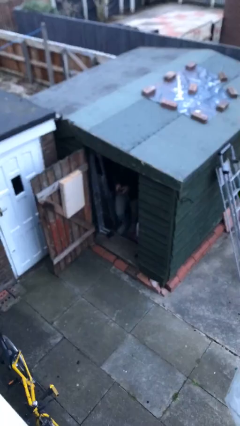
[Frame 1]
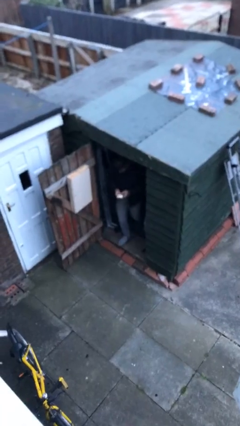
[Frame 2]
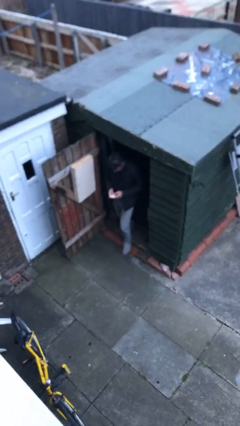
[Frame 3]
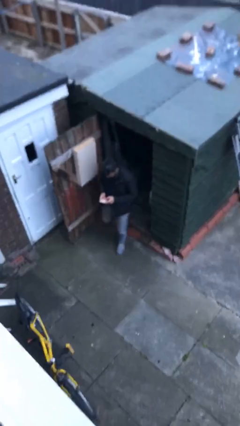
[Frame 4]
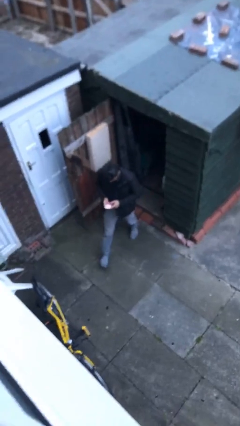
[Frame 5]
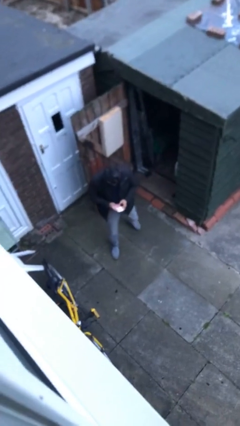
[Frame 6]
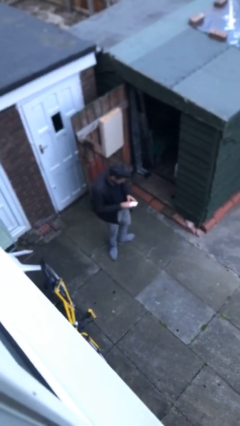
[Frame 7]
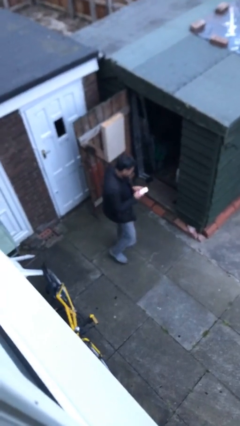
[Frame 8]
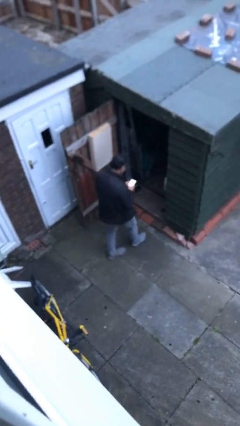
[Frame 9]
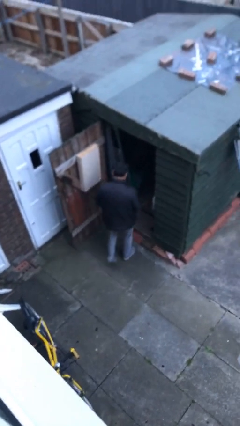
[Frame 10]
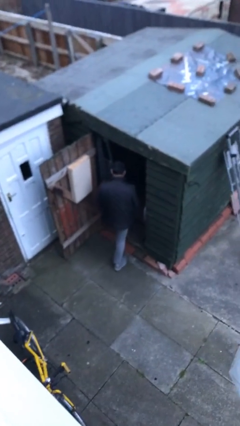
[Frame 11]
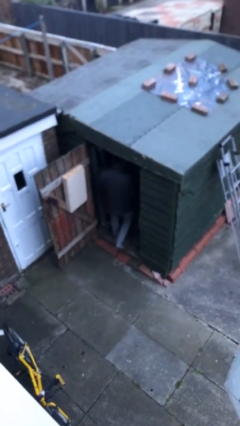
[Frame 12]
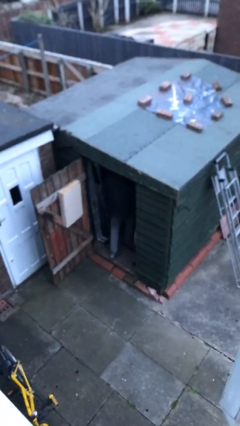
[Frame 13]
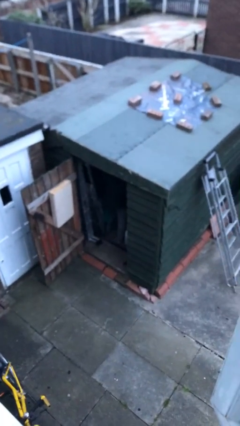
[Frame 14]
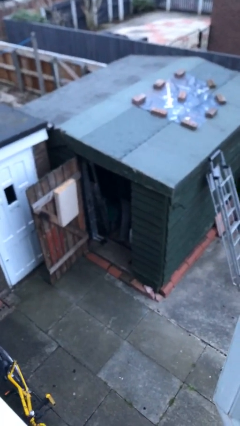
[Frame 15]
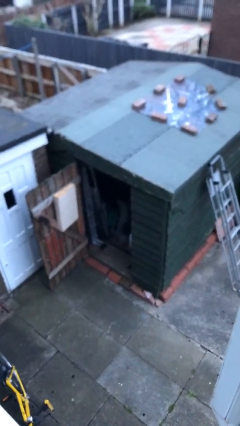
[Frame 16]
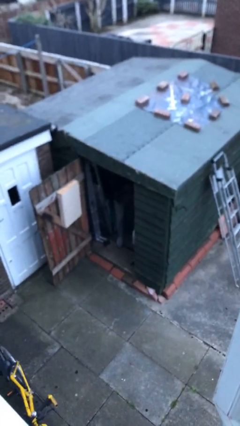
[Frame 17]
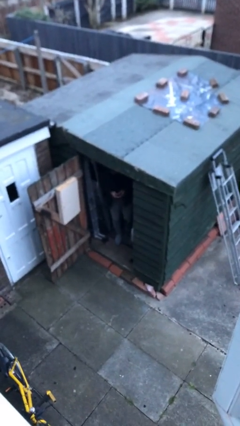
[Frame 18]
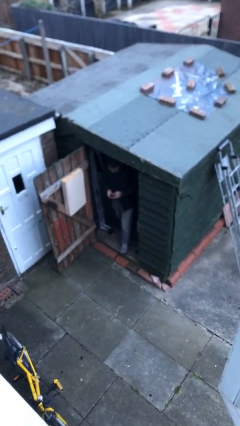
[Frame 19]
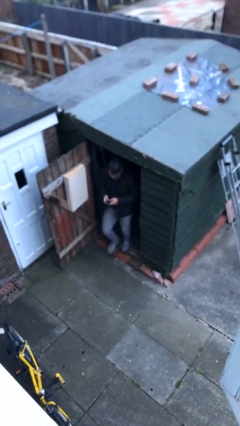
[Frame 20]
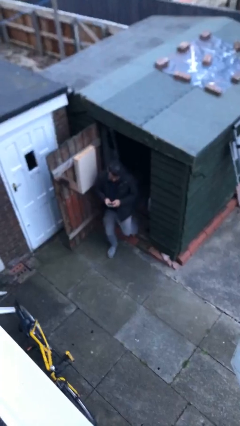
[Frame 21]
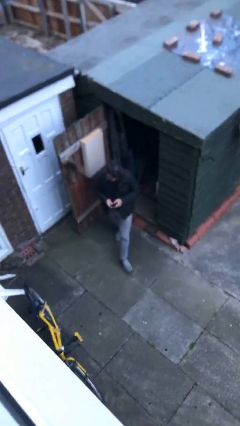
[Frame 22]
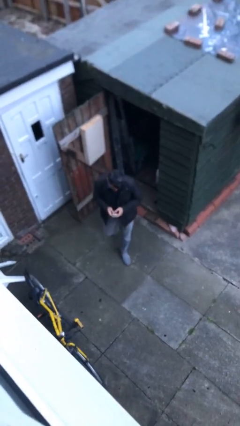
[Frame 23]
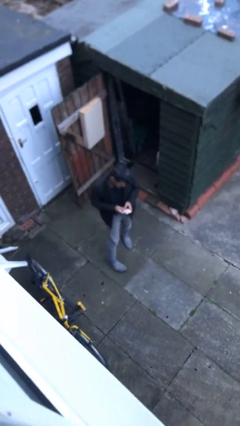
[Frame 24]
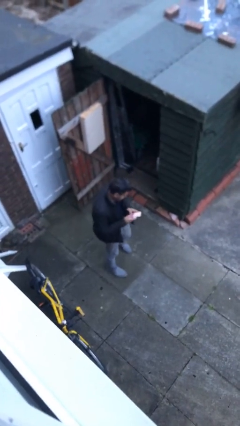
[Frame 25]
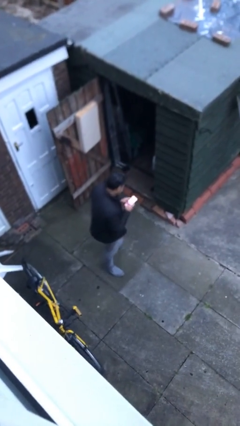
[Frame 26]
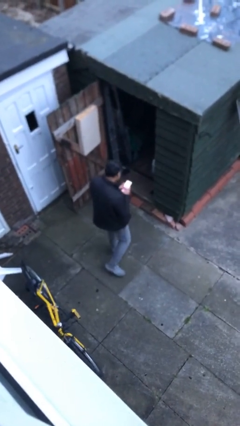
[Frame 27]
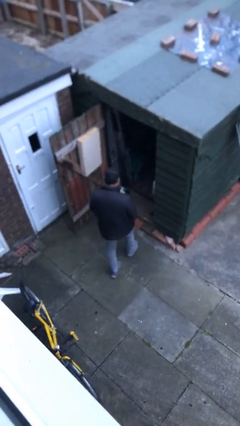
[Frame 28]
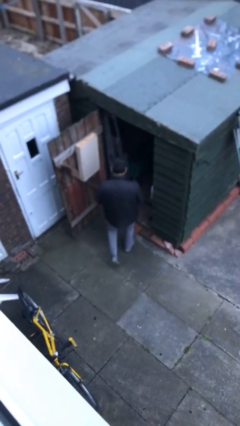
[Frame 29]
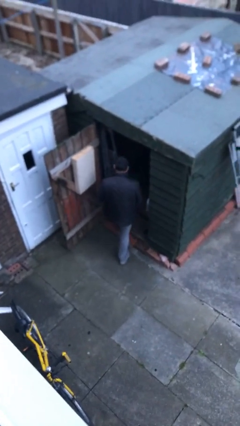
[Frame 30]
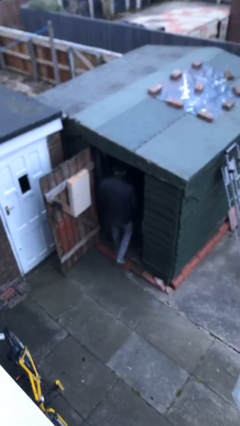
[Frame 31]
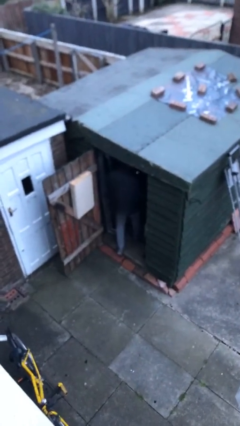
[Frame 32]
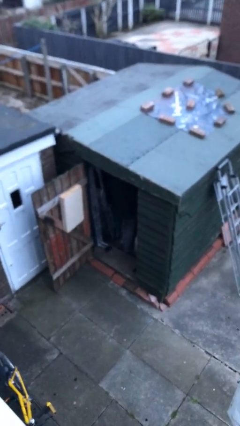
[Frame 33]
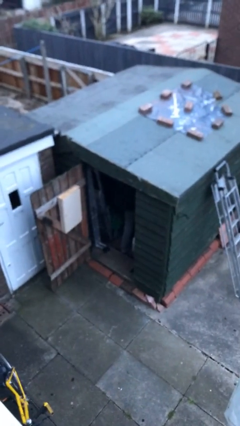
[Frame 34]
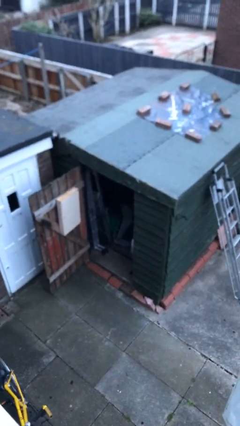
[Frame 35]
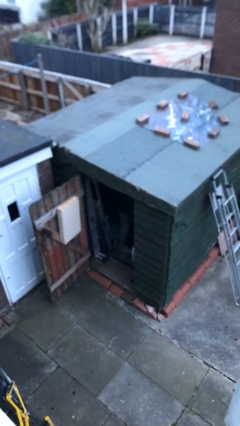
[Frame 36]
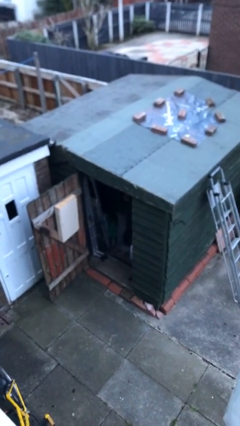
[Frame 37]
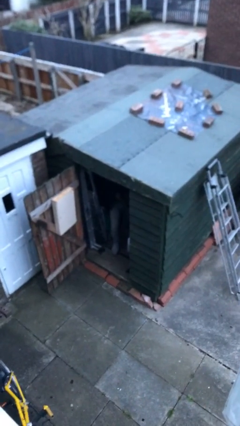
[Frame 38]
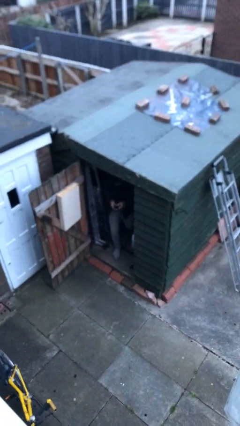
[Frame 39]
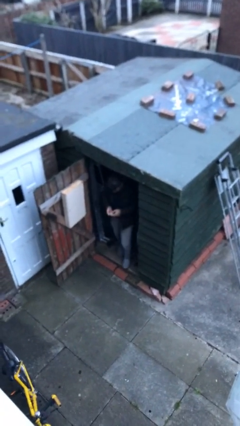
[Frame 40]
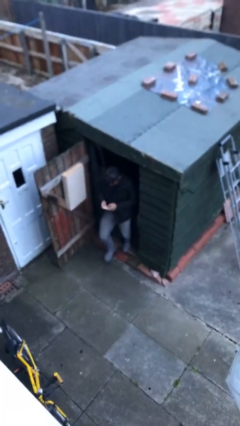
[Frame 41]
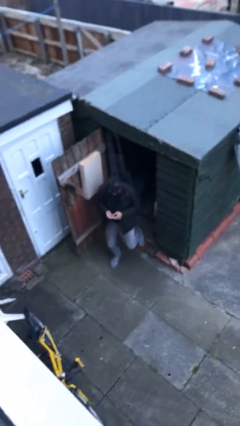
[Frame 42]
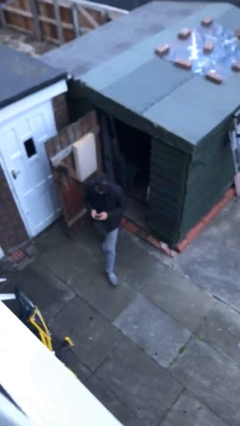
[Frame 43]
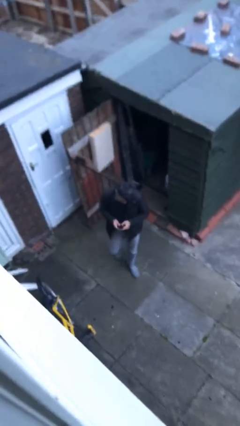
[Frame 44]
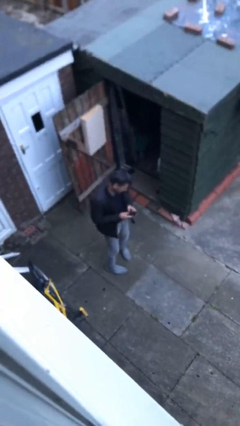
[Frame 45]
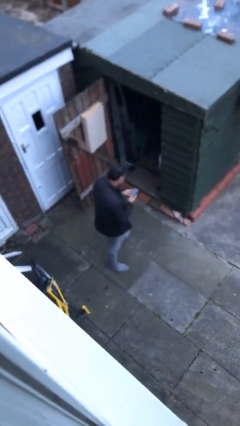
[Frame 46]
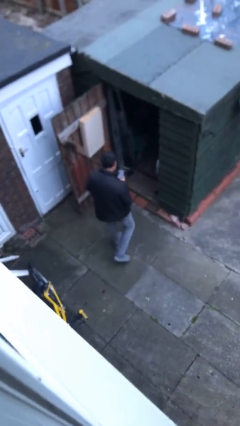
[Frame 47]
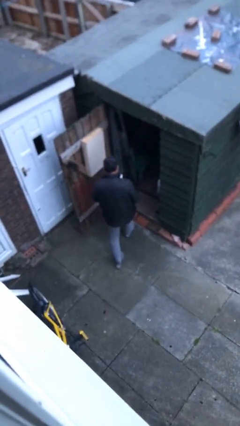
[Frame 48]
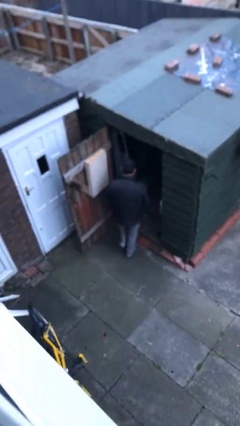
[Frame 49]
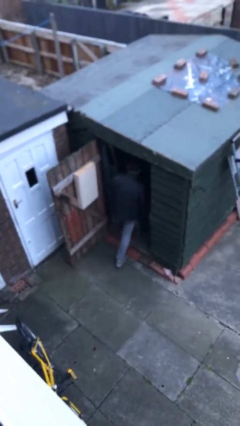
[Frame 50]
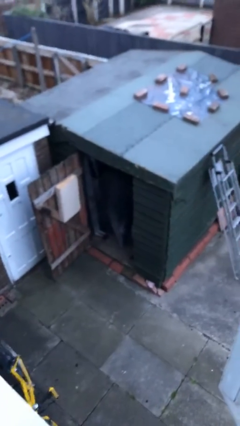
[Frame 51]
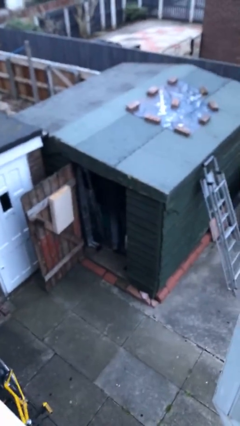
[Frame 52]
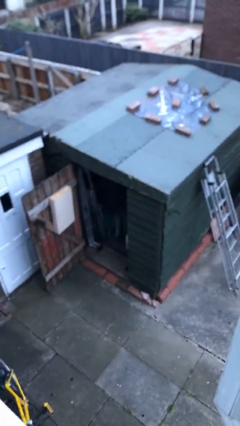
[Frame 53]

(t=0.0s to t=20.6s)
person texts on phone

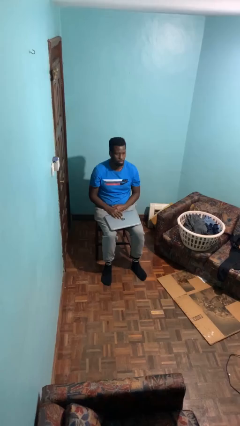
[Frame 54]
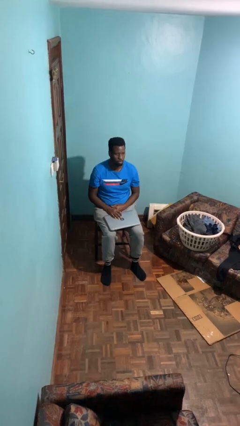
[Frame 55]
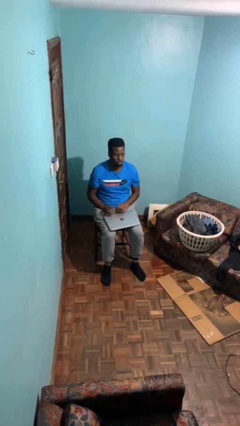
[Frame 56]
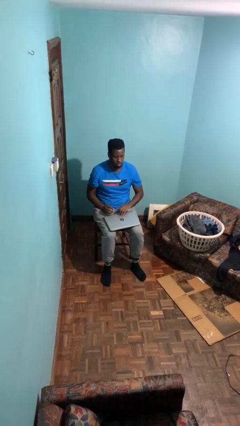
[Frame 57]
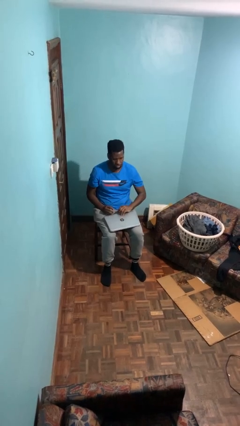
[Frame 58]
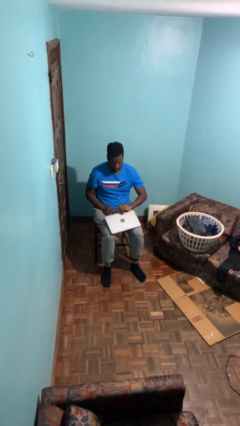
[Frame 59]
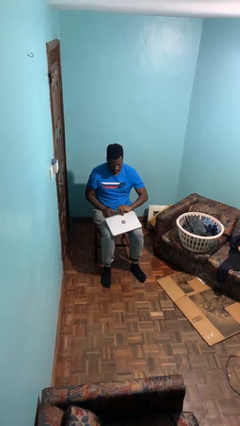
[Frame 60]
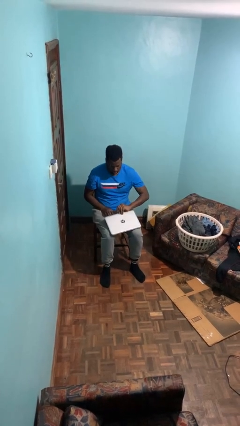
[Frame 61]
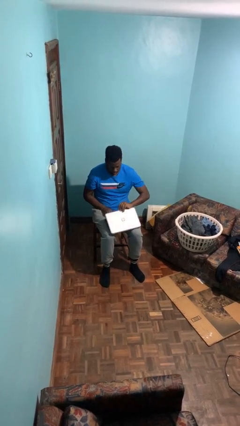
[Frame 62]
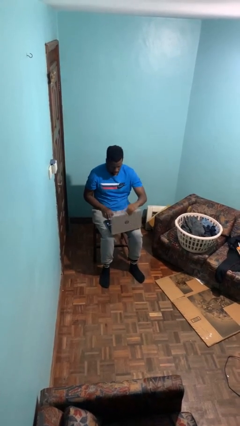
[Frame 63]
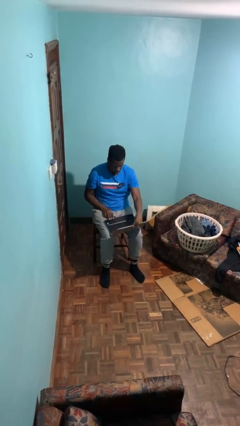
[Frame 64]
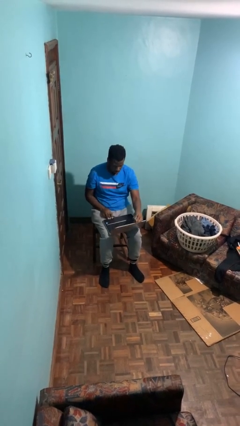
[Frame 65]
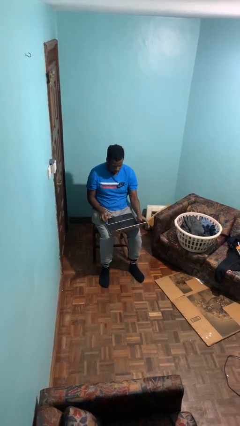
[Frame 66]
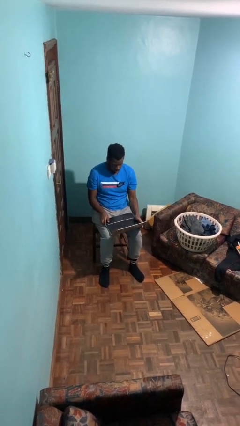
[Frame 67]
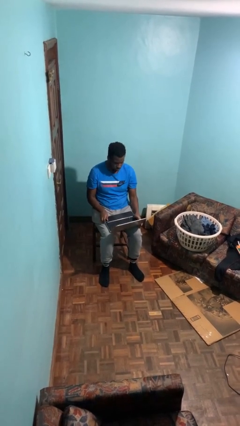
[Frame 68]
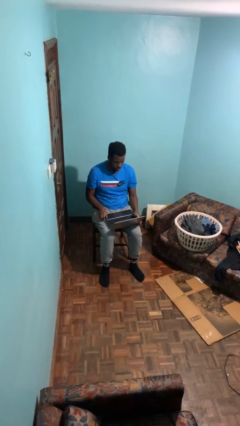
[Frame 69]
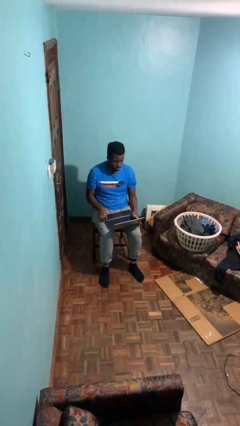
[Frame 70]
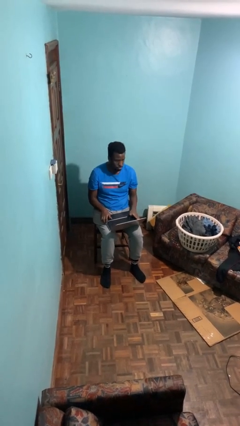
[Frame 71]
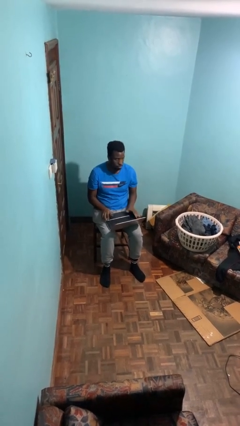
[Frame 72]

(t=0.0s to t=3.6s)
person opens laptop

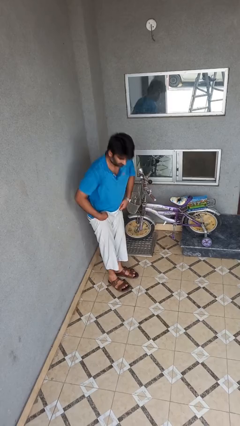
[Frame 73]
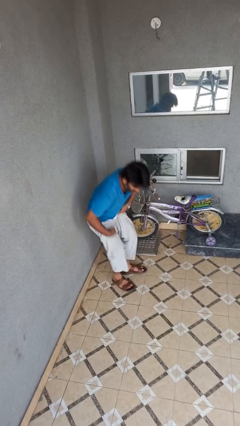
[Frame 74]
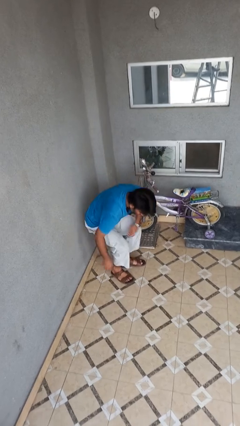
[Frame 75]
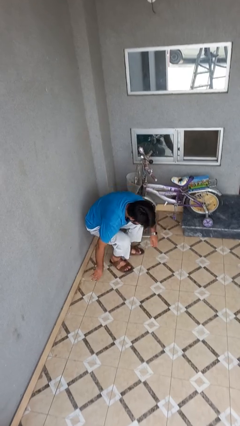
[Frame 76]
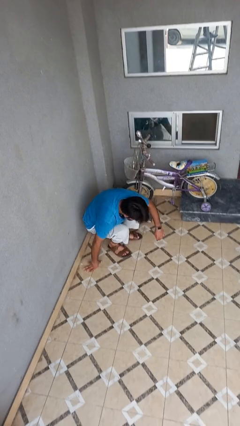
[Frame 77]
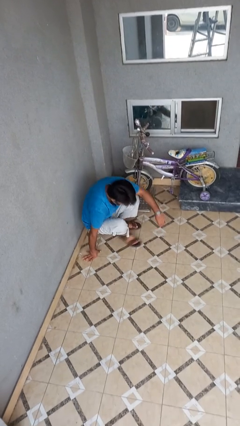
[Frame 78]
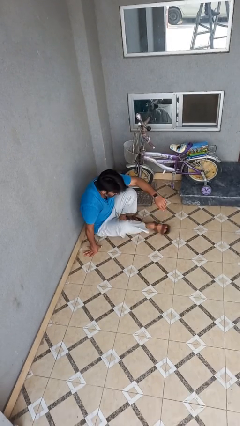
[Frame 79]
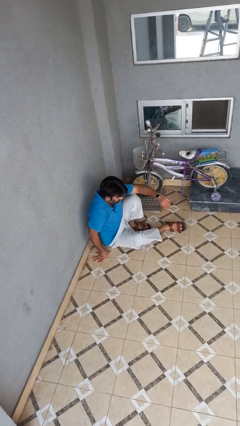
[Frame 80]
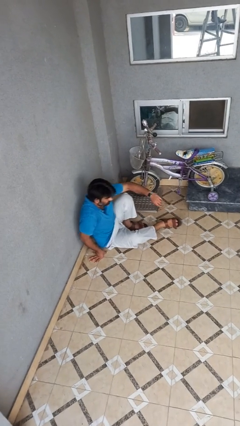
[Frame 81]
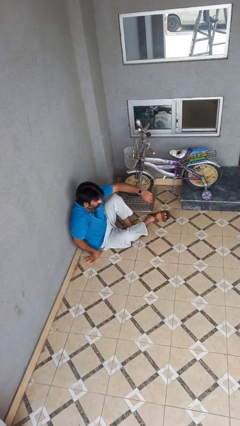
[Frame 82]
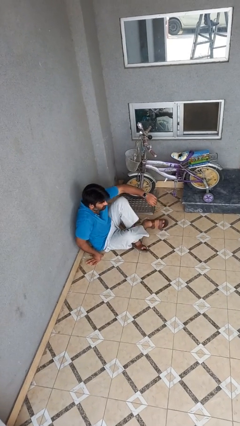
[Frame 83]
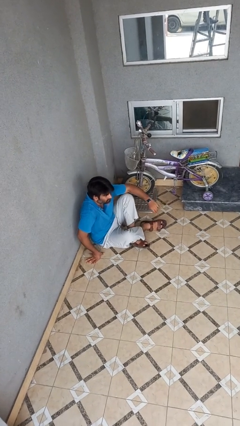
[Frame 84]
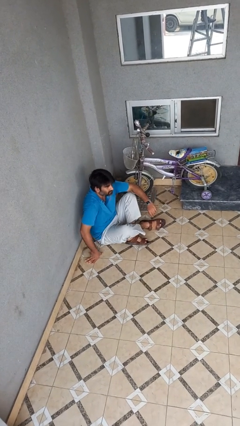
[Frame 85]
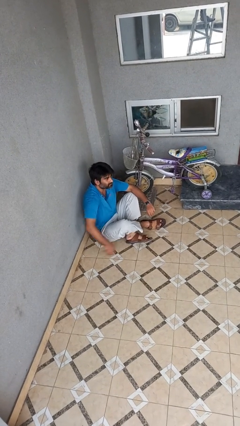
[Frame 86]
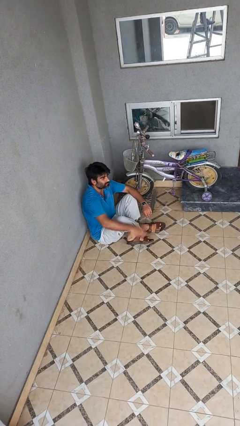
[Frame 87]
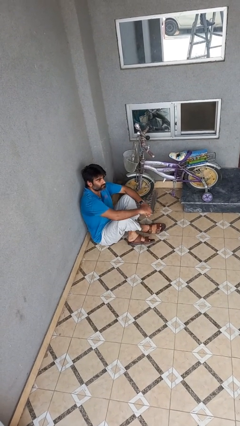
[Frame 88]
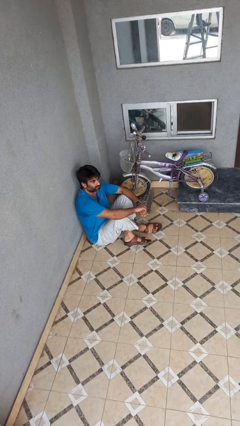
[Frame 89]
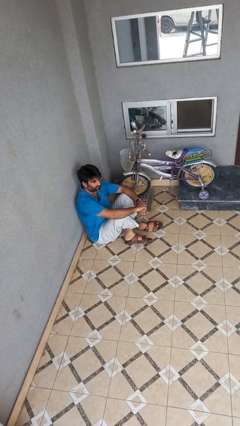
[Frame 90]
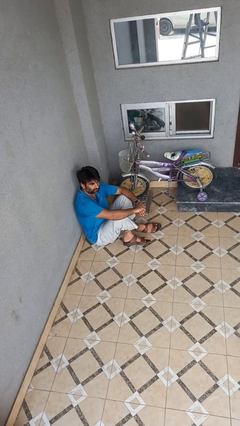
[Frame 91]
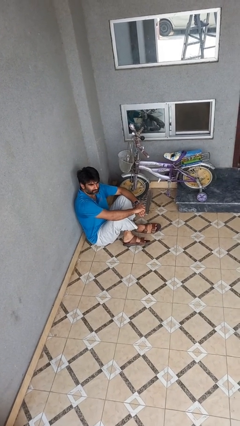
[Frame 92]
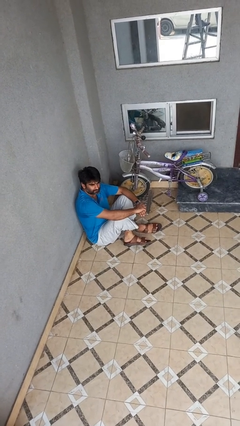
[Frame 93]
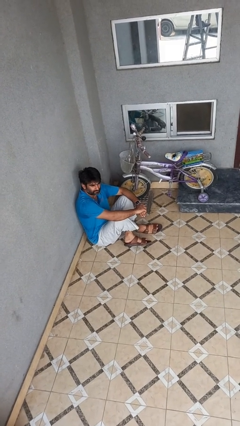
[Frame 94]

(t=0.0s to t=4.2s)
person sits crisscross
